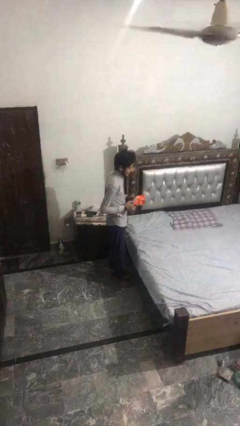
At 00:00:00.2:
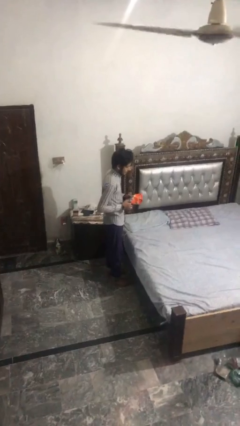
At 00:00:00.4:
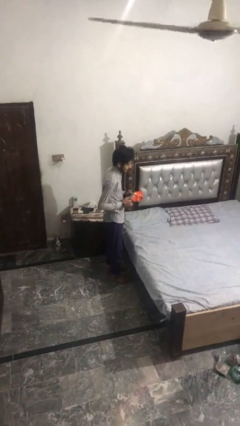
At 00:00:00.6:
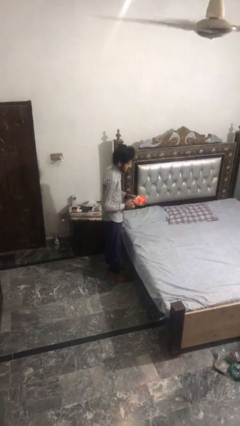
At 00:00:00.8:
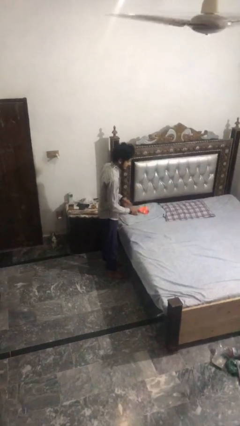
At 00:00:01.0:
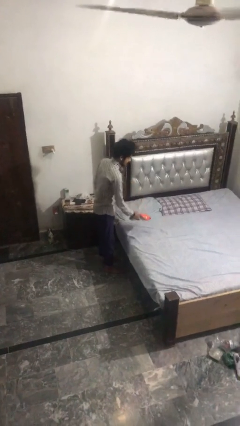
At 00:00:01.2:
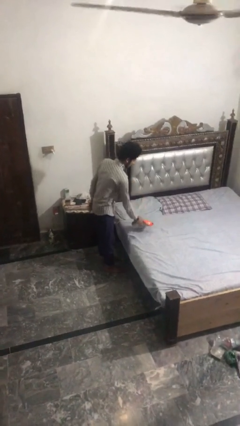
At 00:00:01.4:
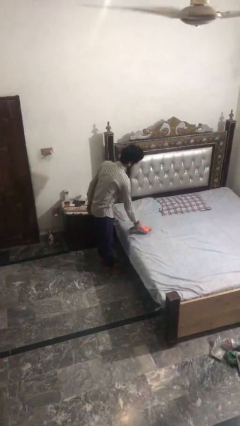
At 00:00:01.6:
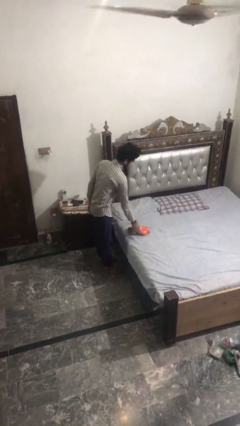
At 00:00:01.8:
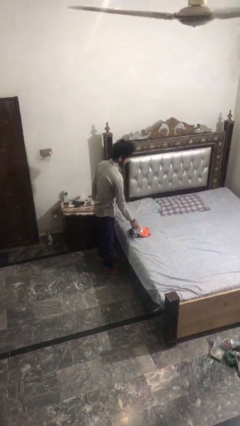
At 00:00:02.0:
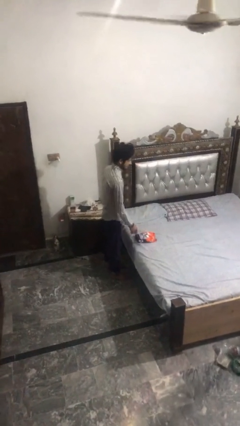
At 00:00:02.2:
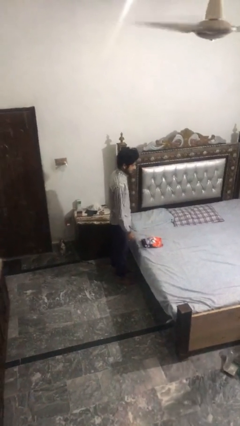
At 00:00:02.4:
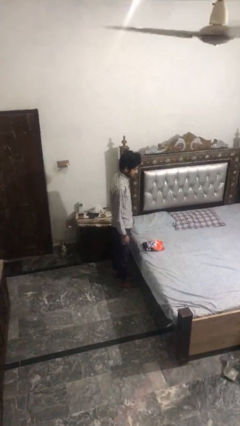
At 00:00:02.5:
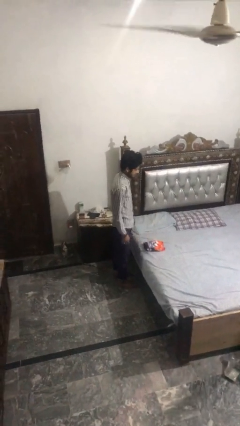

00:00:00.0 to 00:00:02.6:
person puts down object on bed

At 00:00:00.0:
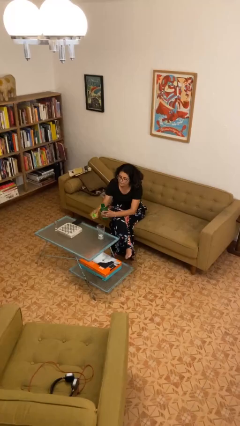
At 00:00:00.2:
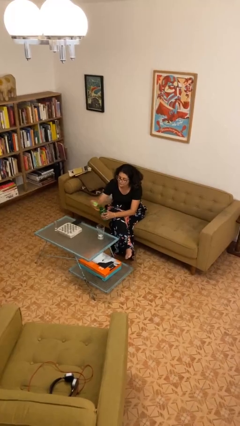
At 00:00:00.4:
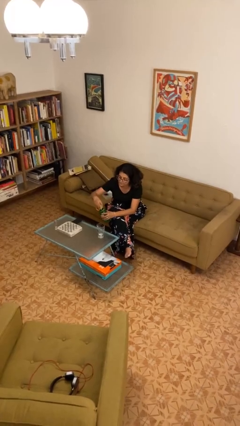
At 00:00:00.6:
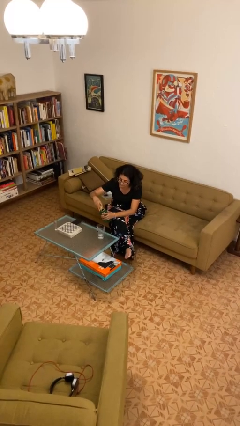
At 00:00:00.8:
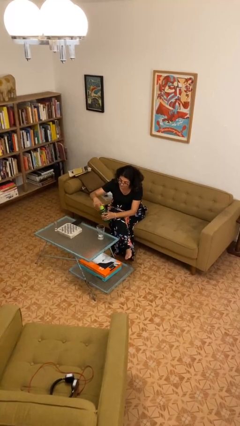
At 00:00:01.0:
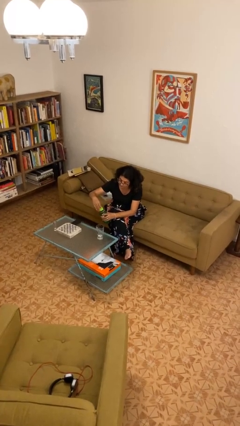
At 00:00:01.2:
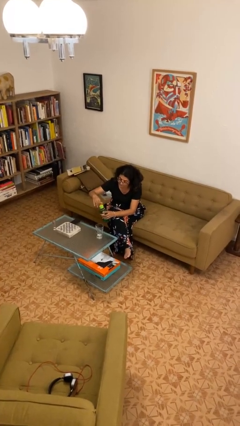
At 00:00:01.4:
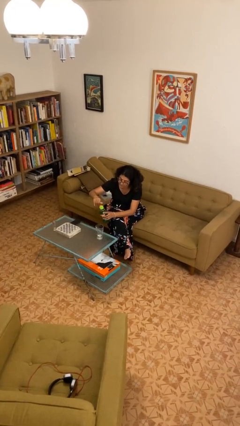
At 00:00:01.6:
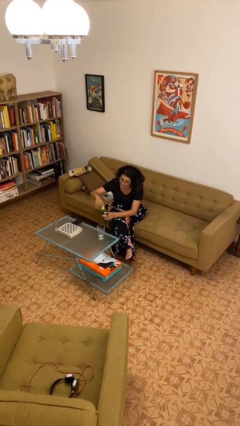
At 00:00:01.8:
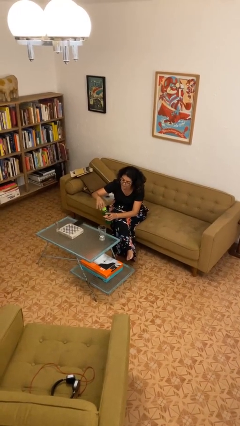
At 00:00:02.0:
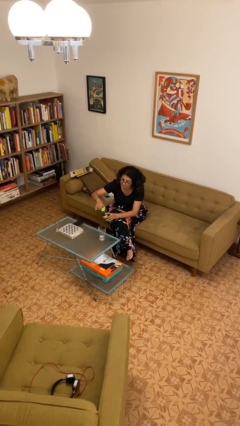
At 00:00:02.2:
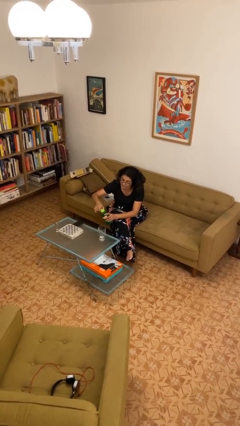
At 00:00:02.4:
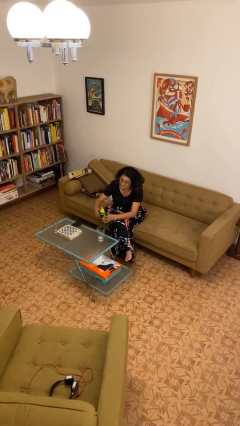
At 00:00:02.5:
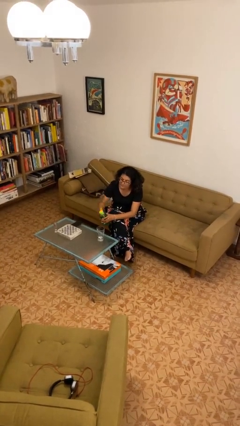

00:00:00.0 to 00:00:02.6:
person screws lid to bottle

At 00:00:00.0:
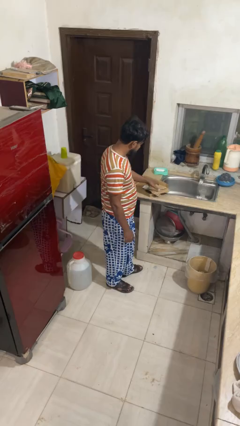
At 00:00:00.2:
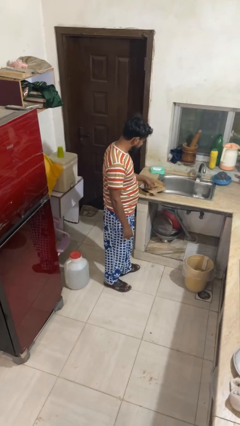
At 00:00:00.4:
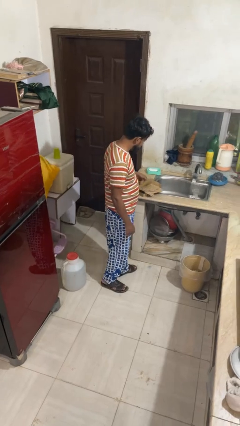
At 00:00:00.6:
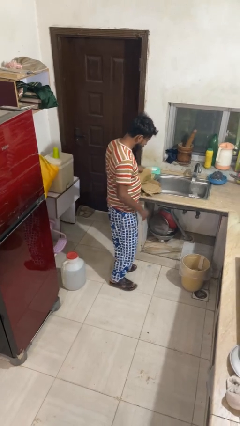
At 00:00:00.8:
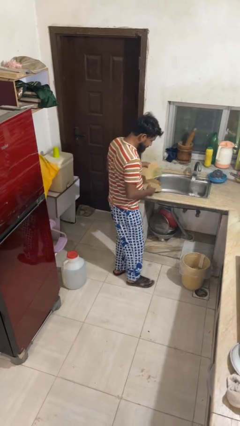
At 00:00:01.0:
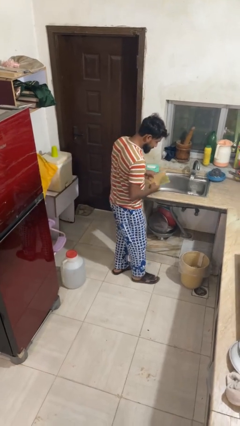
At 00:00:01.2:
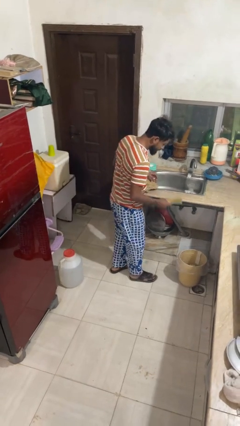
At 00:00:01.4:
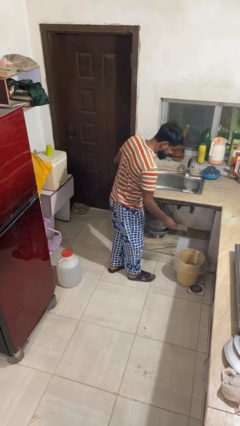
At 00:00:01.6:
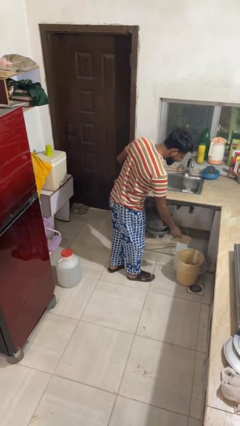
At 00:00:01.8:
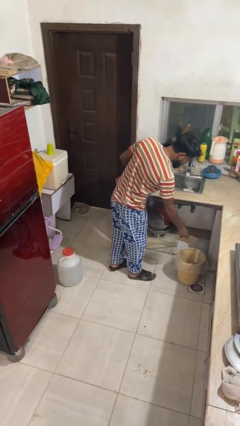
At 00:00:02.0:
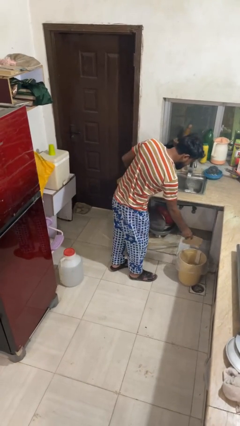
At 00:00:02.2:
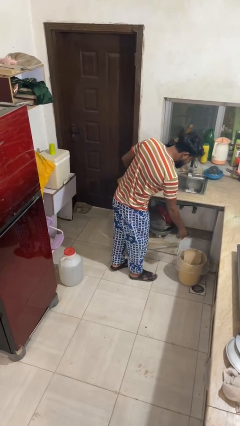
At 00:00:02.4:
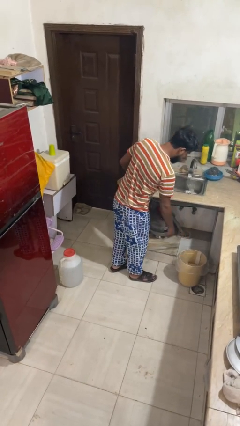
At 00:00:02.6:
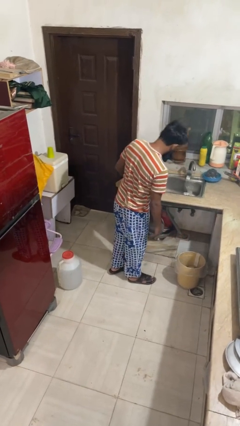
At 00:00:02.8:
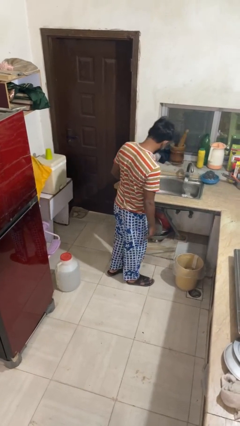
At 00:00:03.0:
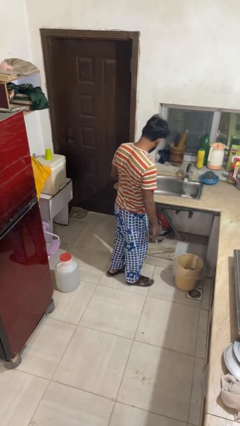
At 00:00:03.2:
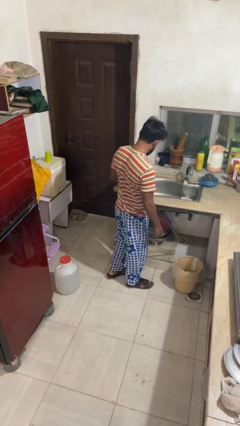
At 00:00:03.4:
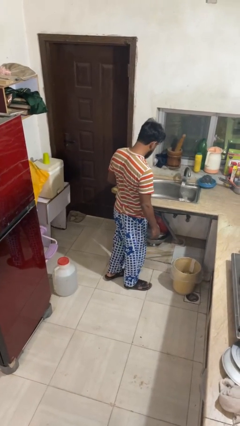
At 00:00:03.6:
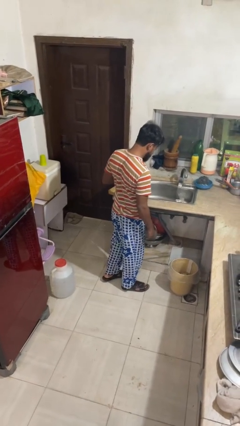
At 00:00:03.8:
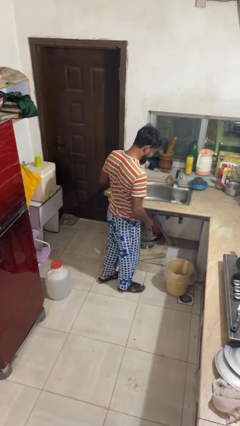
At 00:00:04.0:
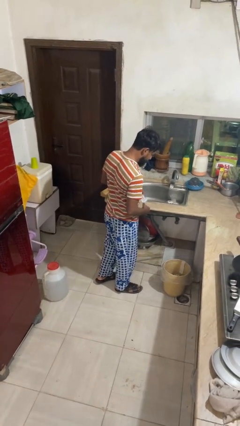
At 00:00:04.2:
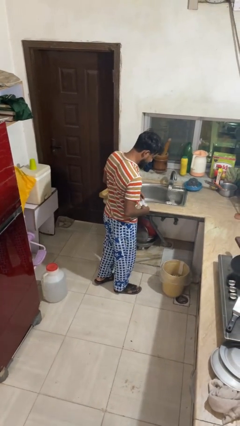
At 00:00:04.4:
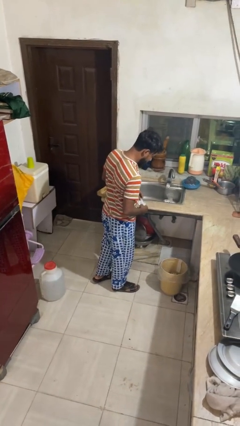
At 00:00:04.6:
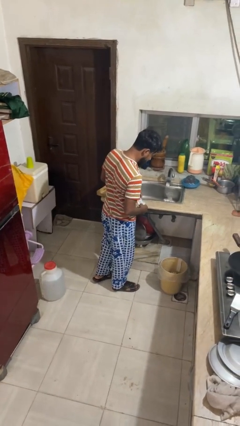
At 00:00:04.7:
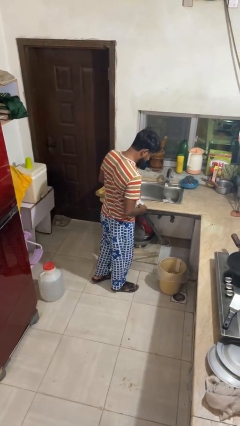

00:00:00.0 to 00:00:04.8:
person discards trash

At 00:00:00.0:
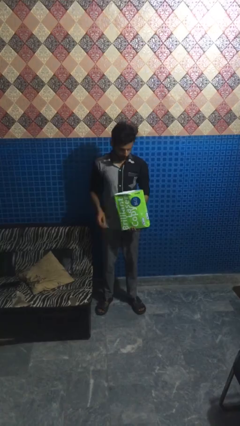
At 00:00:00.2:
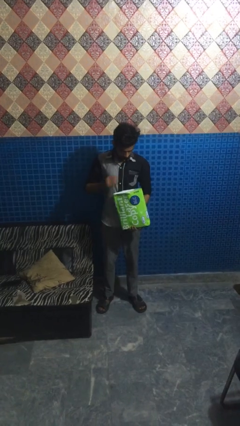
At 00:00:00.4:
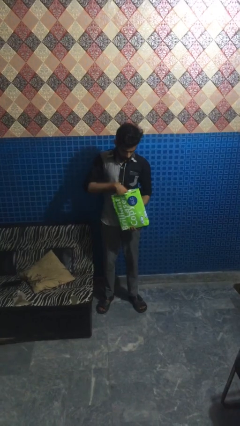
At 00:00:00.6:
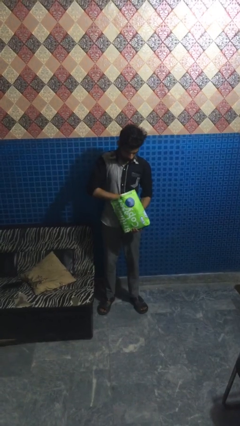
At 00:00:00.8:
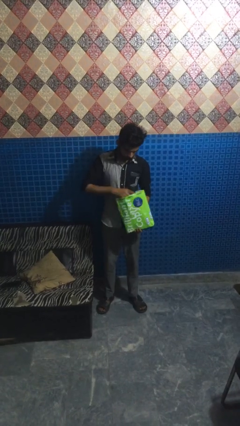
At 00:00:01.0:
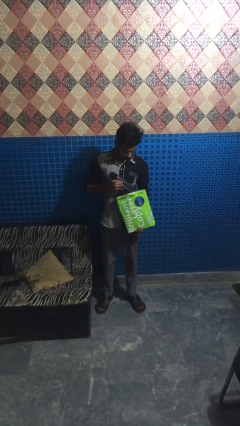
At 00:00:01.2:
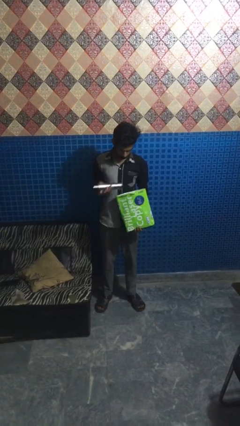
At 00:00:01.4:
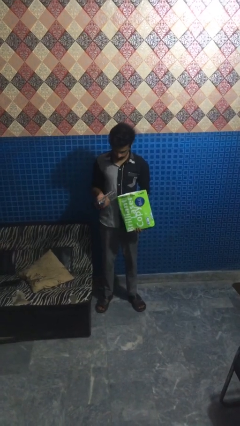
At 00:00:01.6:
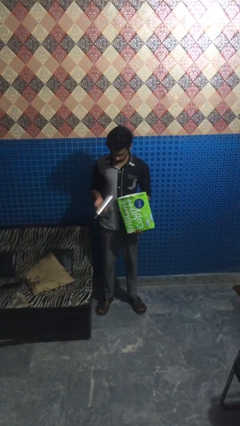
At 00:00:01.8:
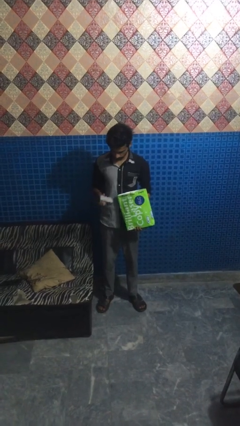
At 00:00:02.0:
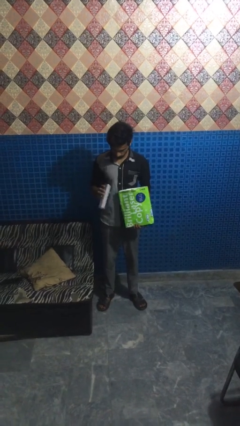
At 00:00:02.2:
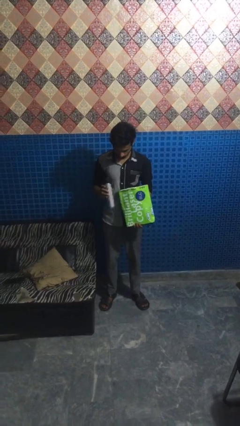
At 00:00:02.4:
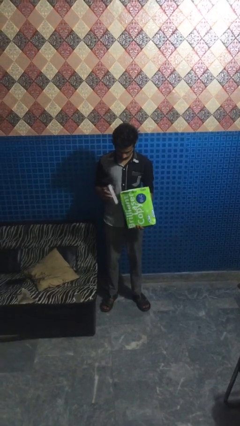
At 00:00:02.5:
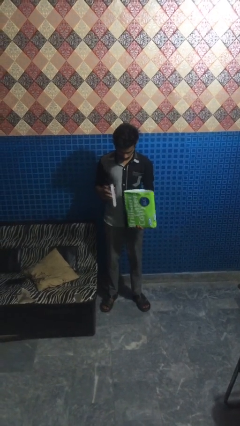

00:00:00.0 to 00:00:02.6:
person takes object from bag

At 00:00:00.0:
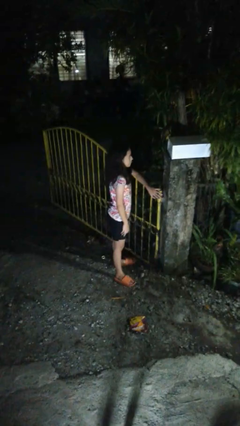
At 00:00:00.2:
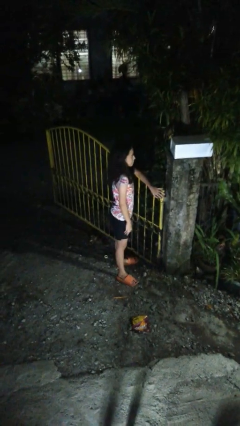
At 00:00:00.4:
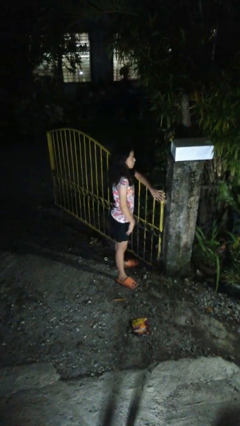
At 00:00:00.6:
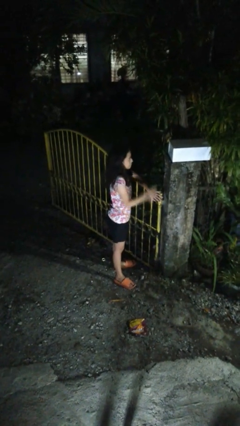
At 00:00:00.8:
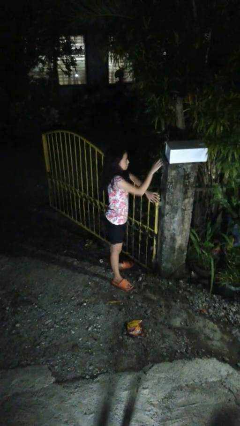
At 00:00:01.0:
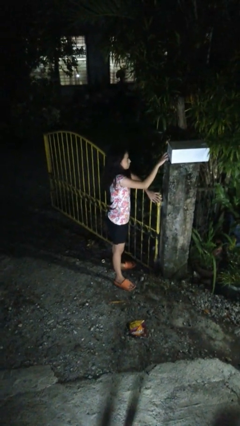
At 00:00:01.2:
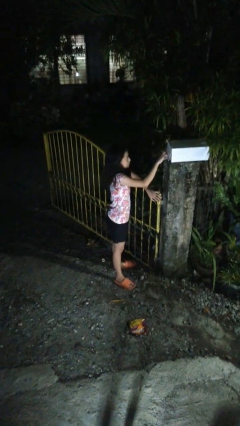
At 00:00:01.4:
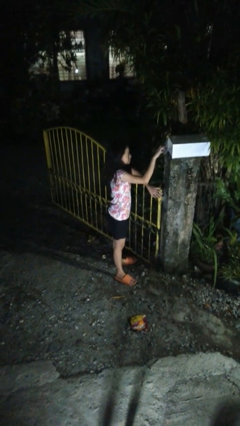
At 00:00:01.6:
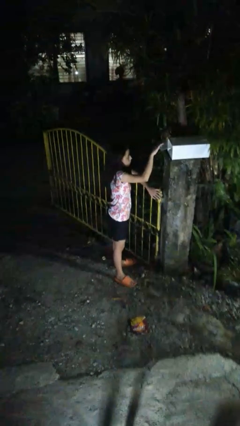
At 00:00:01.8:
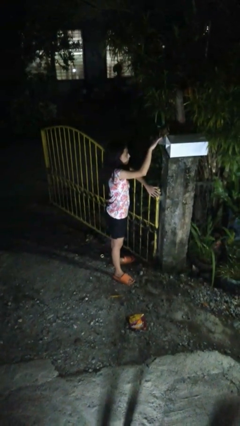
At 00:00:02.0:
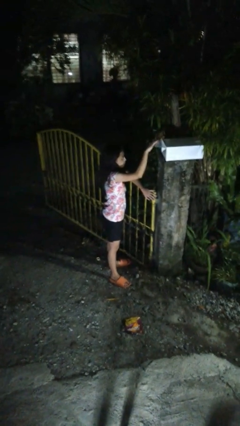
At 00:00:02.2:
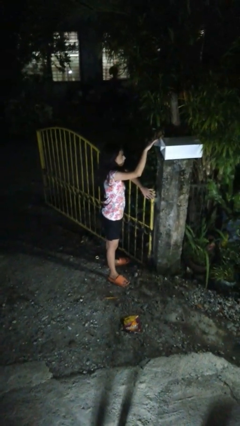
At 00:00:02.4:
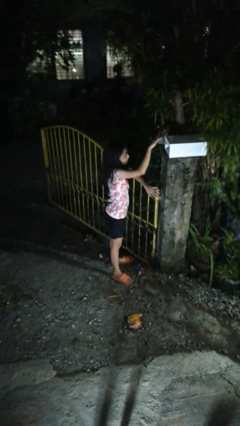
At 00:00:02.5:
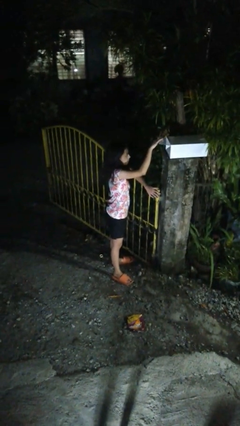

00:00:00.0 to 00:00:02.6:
person opens mailbox

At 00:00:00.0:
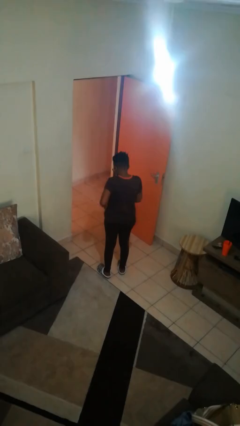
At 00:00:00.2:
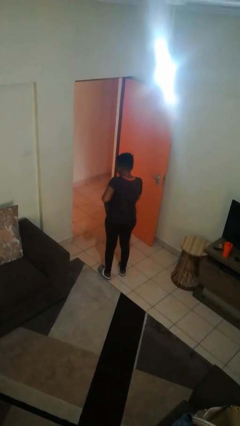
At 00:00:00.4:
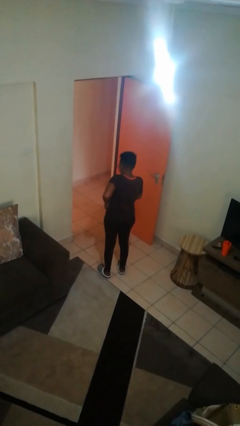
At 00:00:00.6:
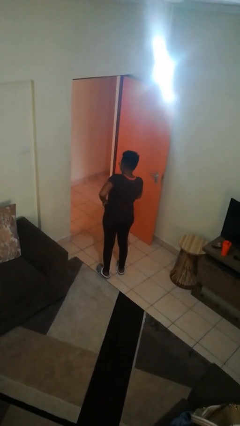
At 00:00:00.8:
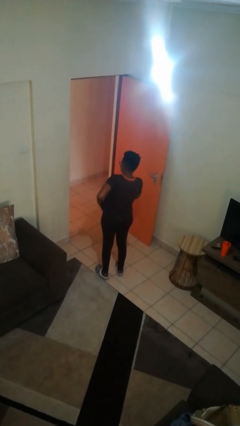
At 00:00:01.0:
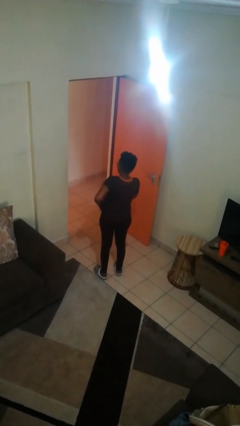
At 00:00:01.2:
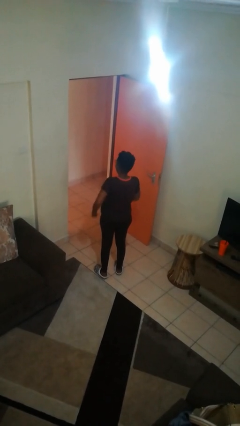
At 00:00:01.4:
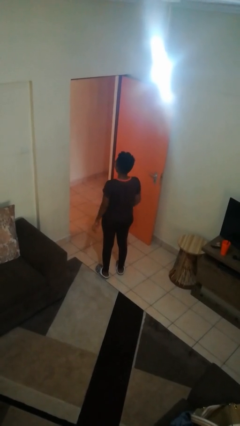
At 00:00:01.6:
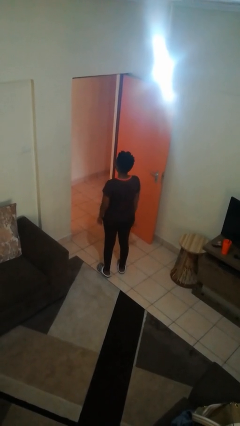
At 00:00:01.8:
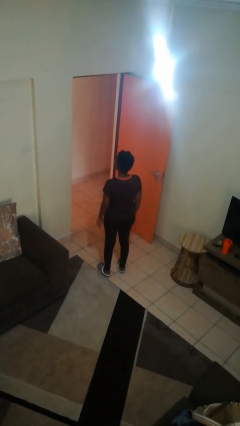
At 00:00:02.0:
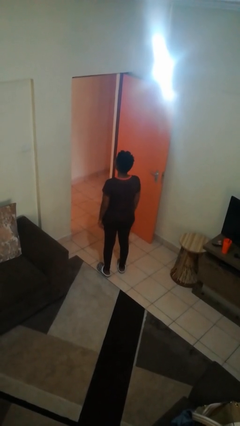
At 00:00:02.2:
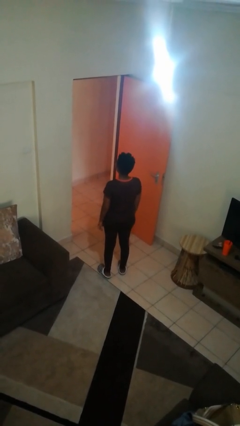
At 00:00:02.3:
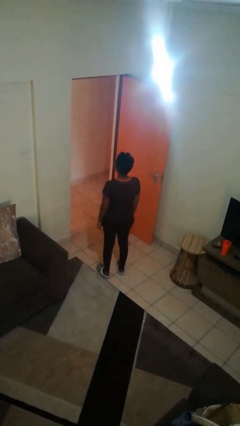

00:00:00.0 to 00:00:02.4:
person puts phone into pocket
